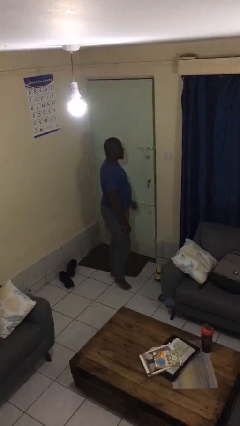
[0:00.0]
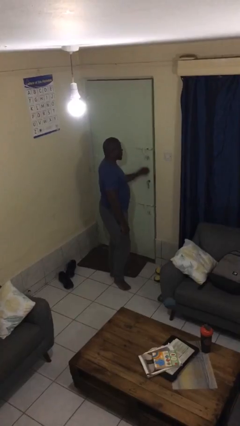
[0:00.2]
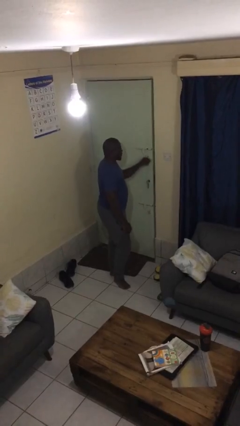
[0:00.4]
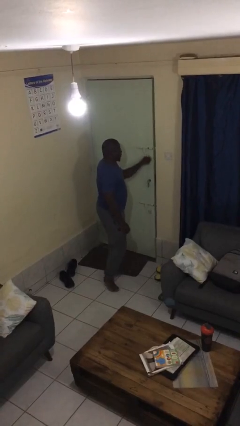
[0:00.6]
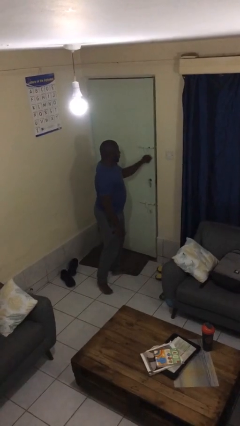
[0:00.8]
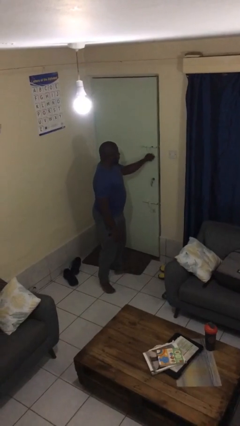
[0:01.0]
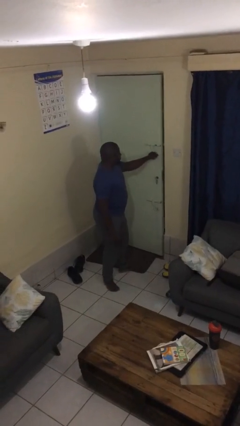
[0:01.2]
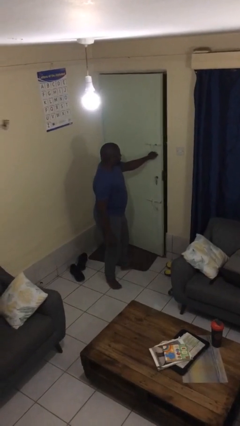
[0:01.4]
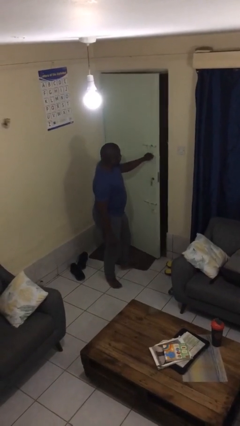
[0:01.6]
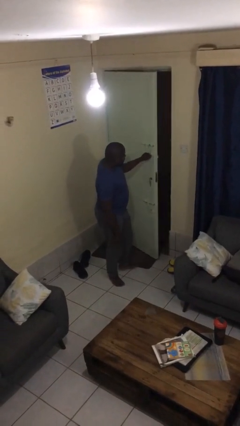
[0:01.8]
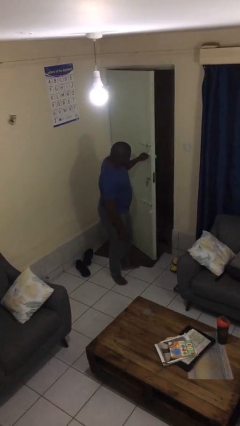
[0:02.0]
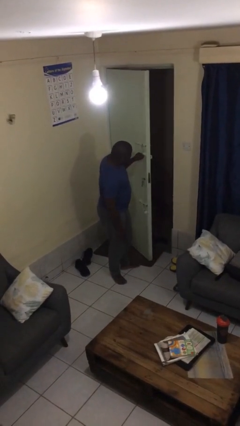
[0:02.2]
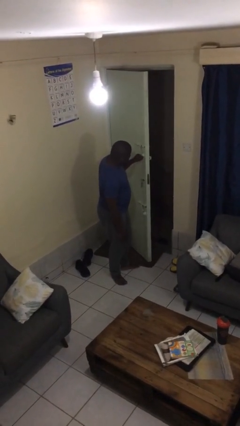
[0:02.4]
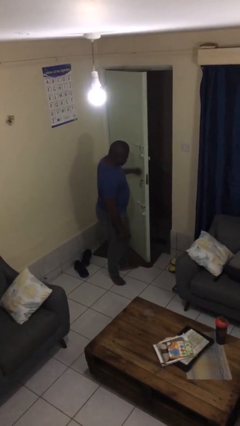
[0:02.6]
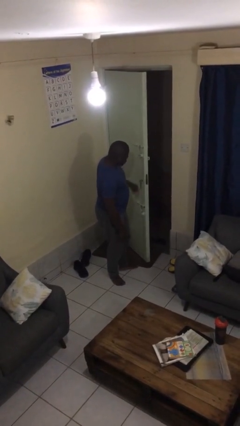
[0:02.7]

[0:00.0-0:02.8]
person opens facility door

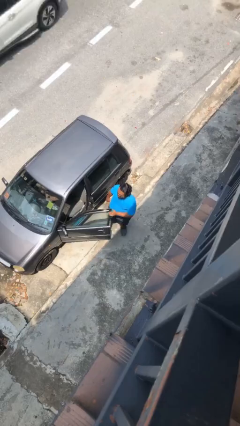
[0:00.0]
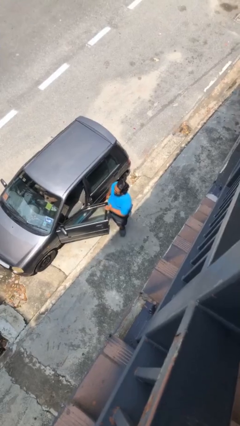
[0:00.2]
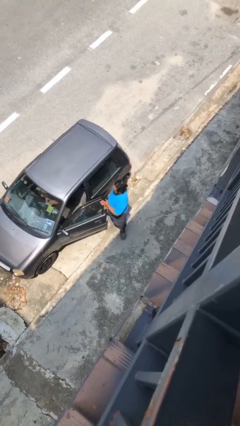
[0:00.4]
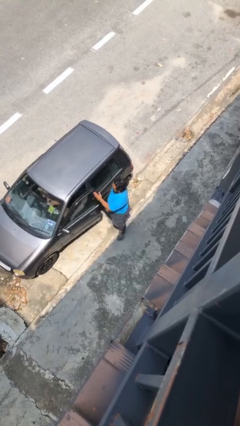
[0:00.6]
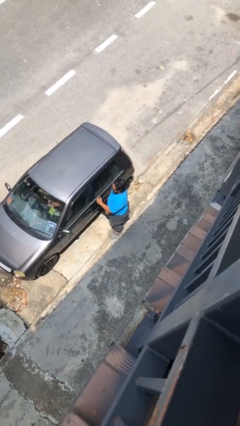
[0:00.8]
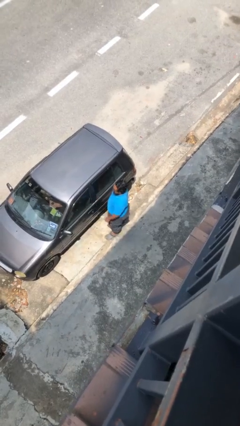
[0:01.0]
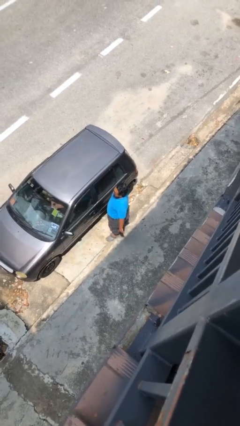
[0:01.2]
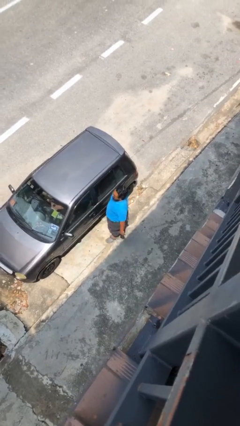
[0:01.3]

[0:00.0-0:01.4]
person closes car door

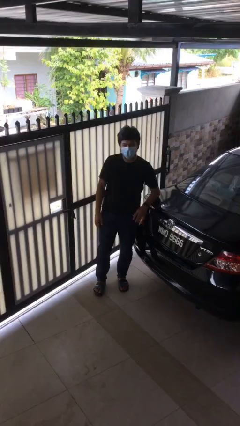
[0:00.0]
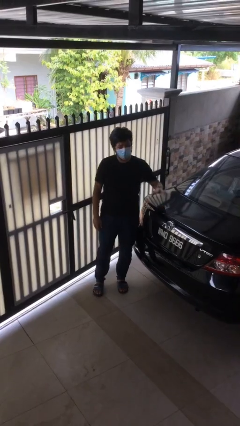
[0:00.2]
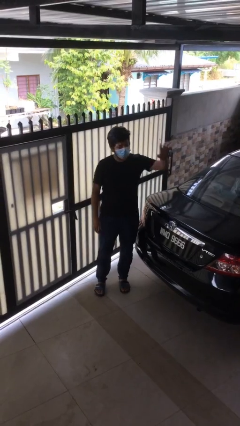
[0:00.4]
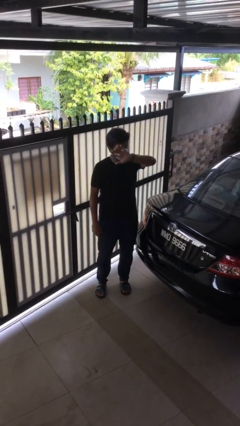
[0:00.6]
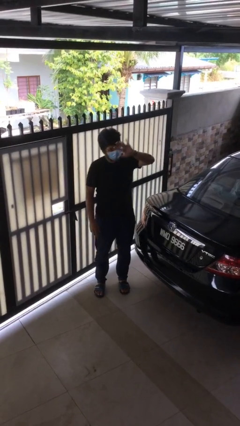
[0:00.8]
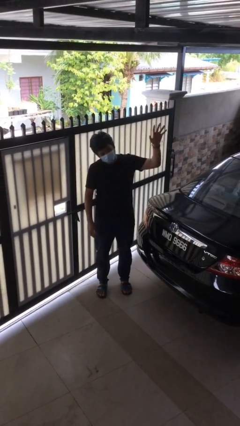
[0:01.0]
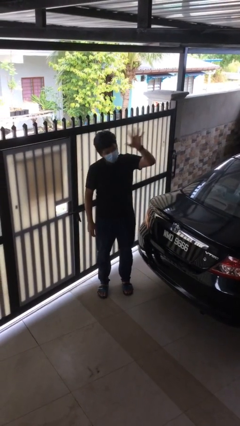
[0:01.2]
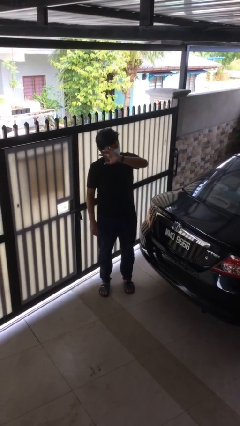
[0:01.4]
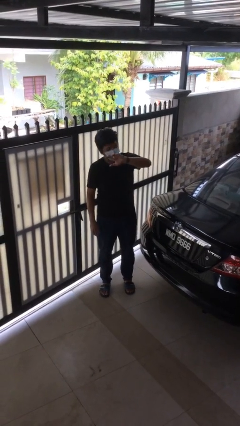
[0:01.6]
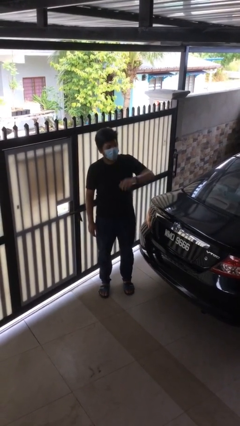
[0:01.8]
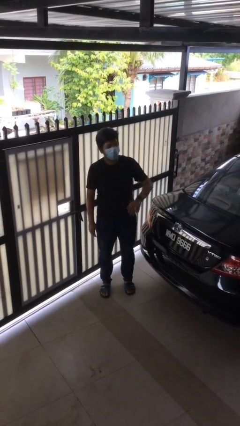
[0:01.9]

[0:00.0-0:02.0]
person waves at person

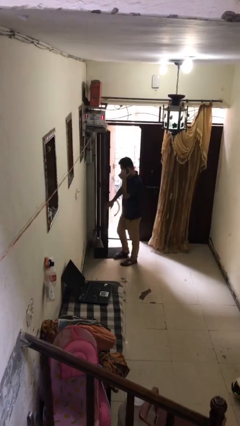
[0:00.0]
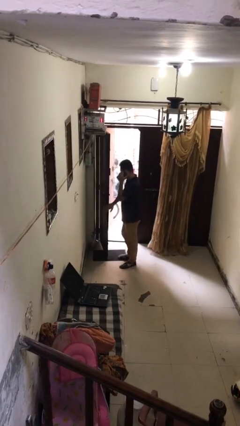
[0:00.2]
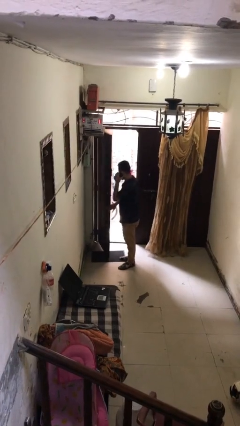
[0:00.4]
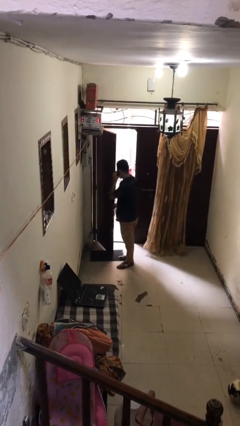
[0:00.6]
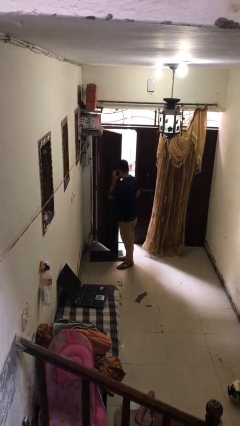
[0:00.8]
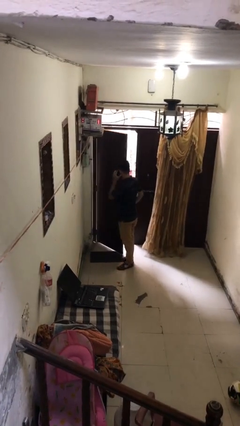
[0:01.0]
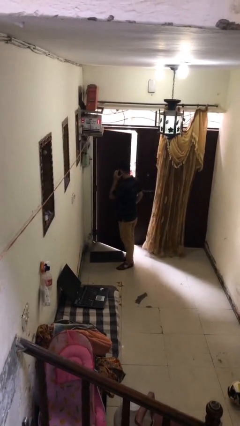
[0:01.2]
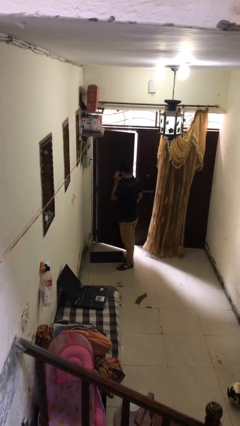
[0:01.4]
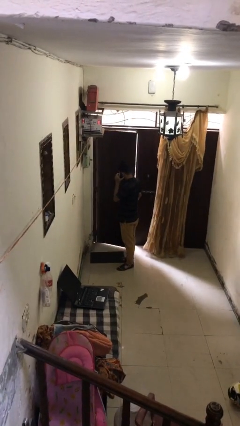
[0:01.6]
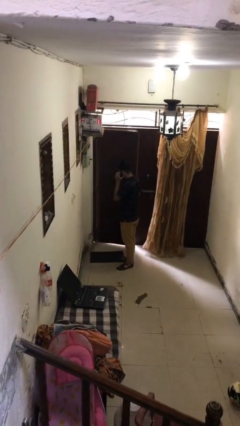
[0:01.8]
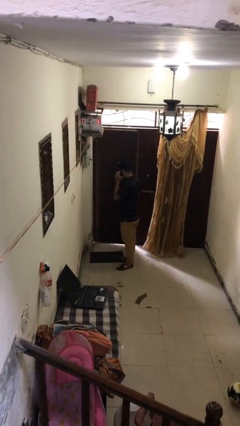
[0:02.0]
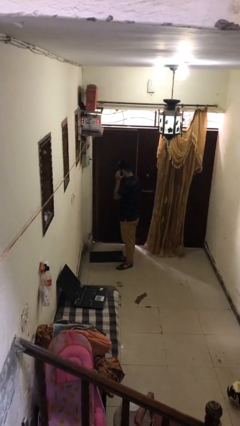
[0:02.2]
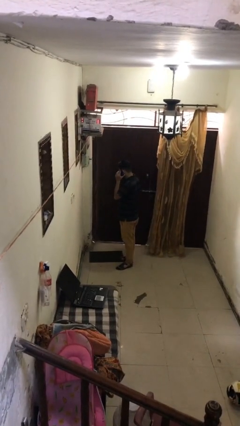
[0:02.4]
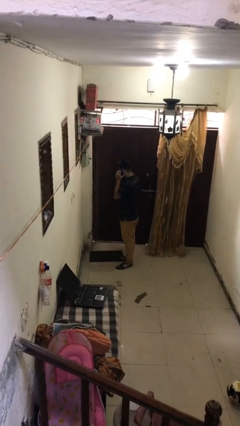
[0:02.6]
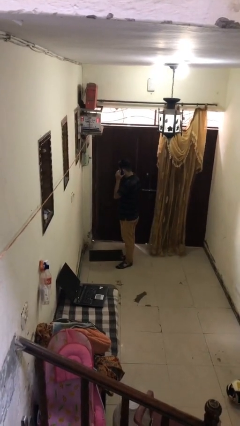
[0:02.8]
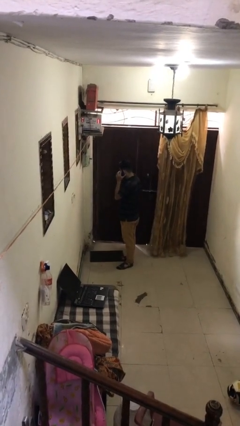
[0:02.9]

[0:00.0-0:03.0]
person closes facility door

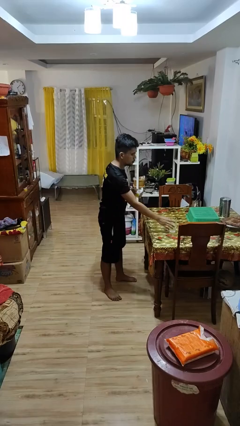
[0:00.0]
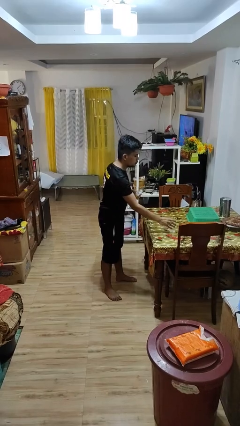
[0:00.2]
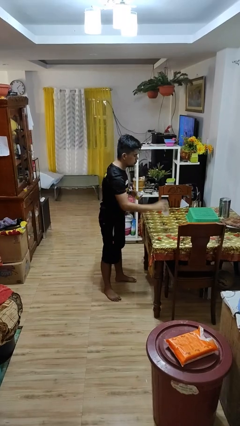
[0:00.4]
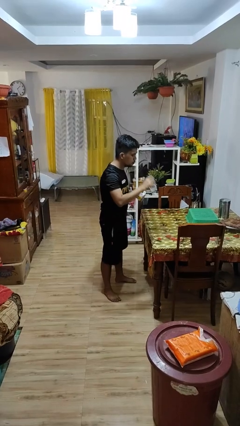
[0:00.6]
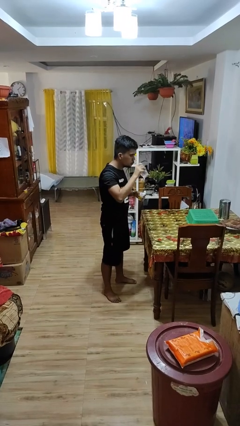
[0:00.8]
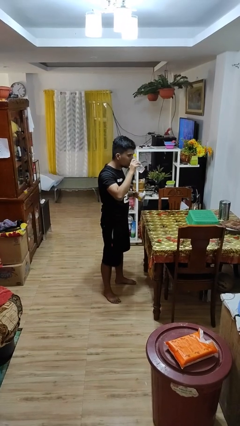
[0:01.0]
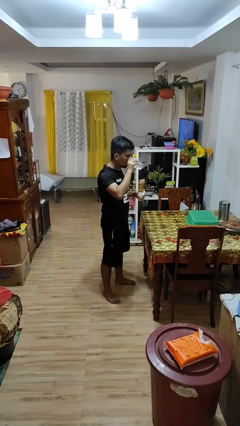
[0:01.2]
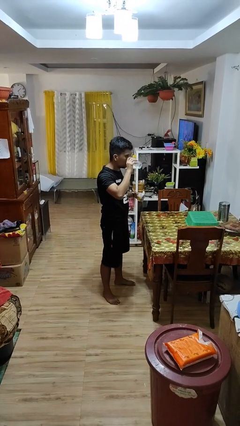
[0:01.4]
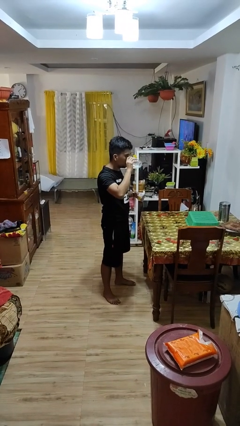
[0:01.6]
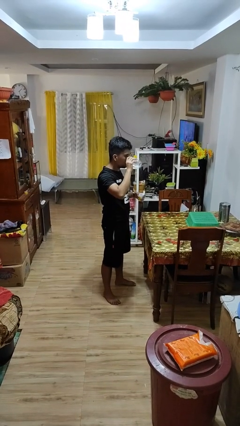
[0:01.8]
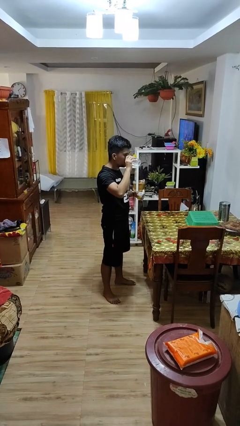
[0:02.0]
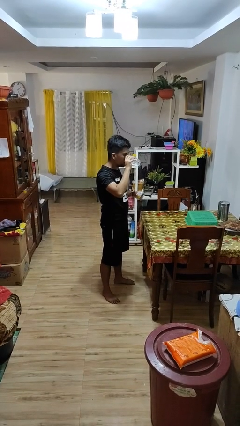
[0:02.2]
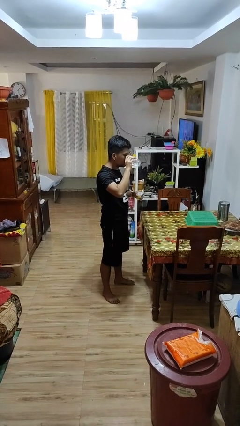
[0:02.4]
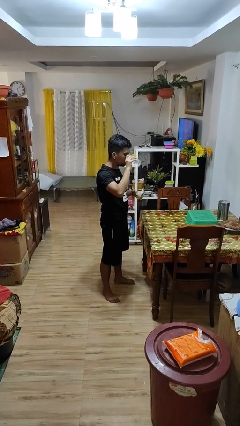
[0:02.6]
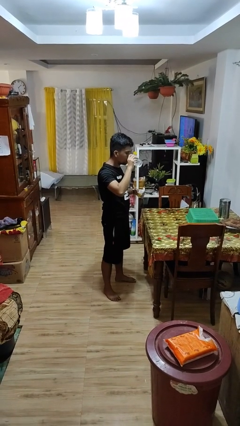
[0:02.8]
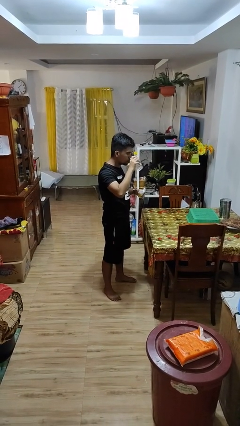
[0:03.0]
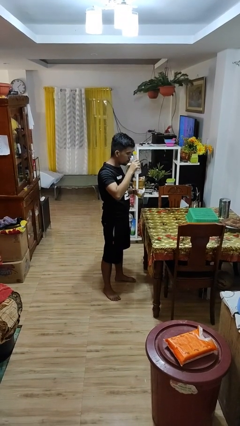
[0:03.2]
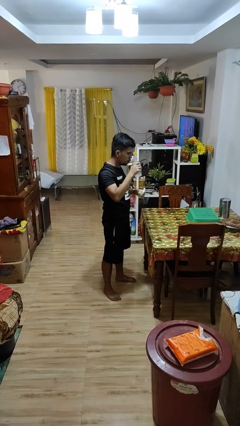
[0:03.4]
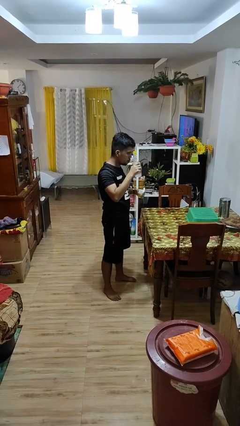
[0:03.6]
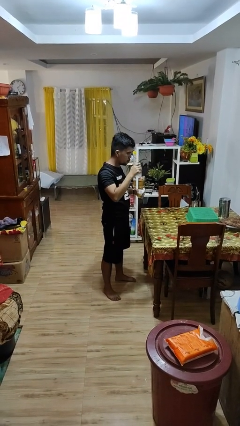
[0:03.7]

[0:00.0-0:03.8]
person drinks from cup

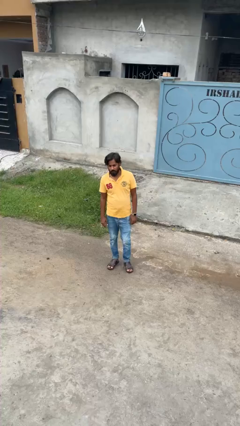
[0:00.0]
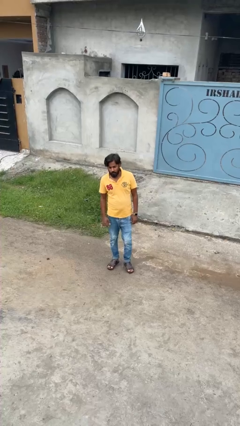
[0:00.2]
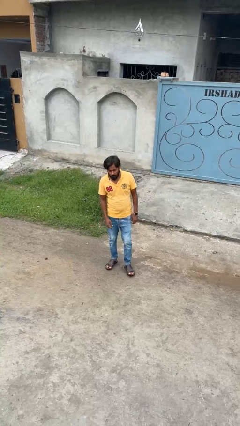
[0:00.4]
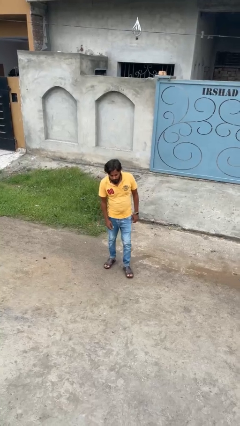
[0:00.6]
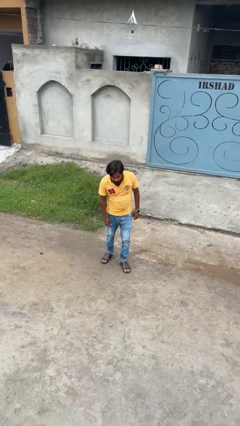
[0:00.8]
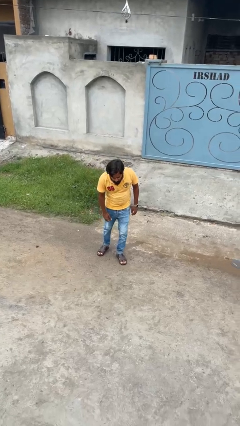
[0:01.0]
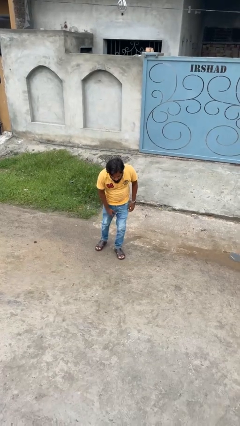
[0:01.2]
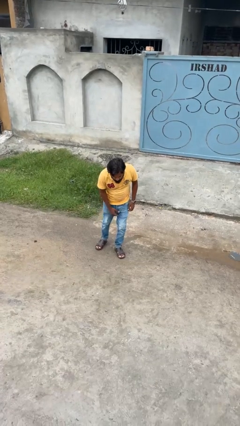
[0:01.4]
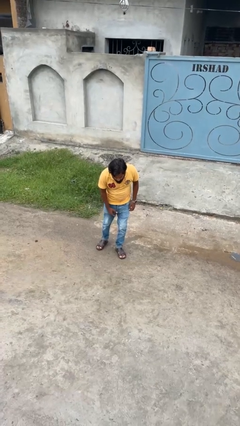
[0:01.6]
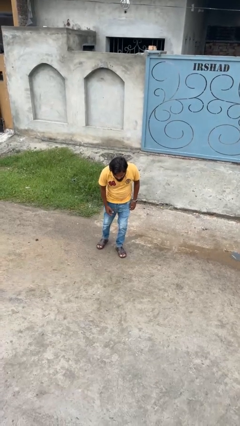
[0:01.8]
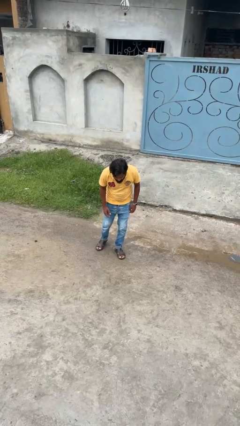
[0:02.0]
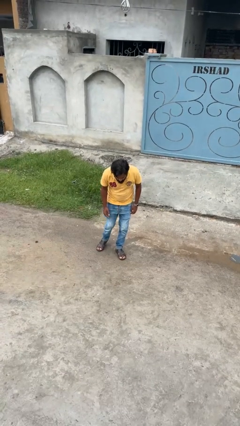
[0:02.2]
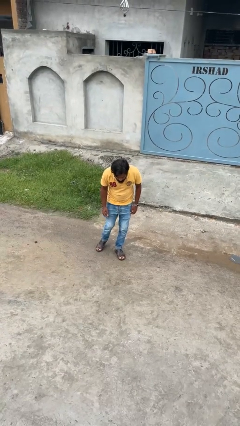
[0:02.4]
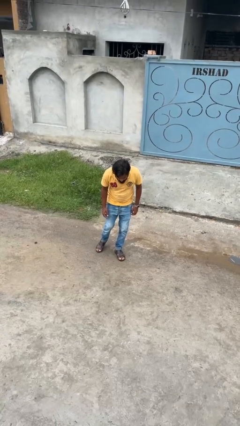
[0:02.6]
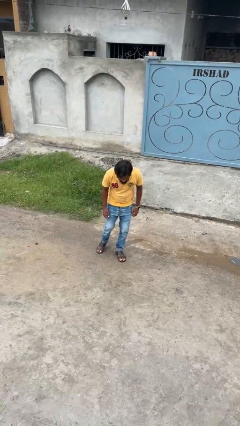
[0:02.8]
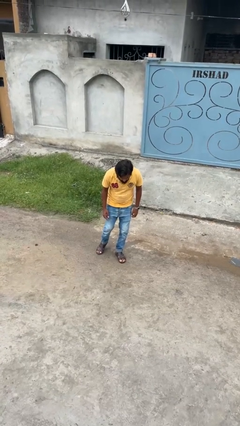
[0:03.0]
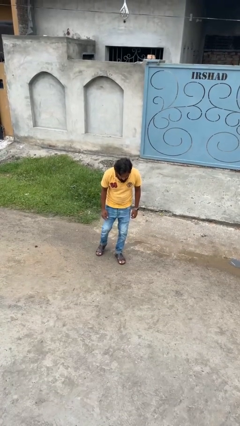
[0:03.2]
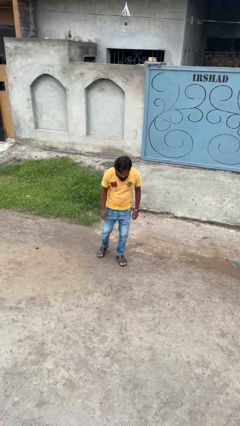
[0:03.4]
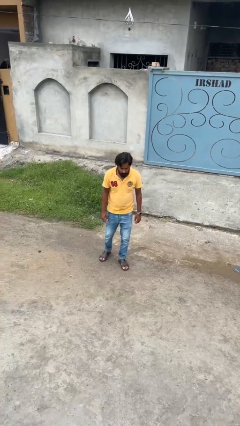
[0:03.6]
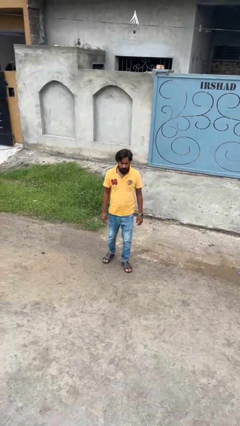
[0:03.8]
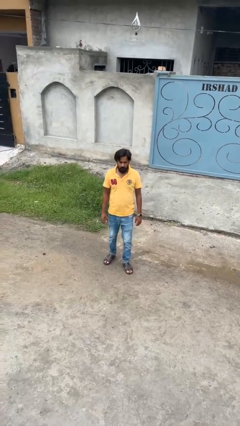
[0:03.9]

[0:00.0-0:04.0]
person bows

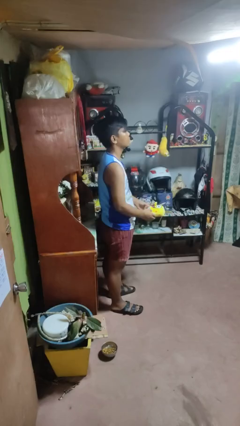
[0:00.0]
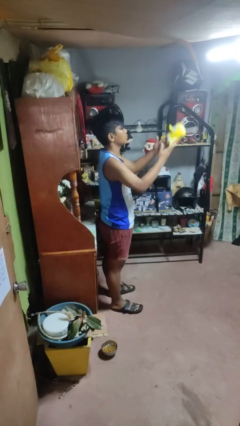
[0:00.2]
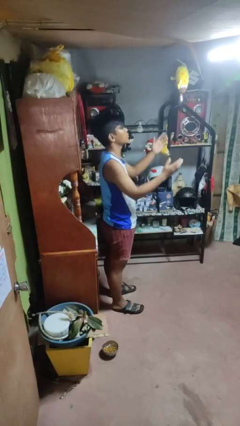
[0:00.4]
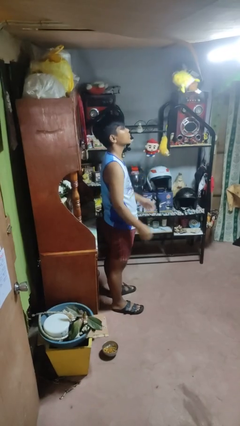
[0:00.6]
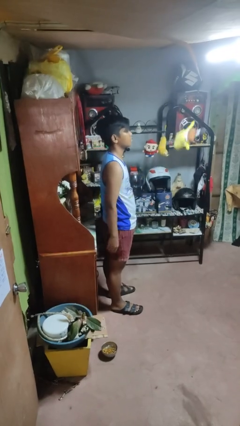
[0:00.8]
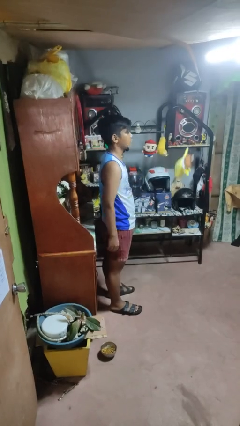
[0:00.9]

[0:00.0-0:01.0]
person throws object into air
